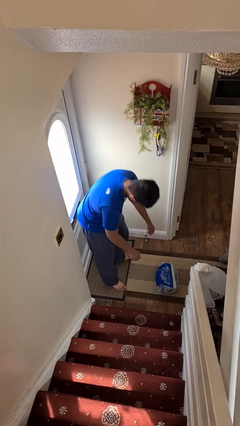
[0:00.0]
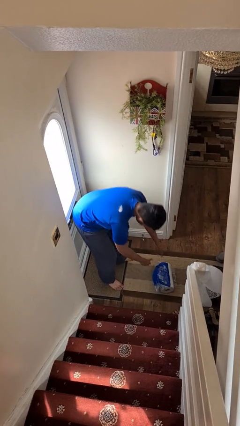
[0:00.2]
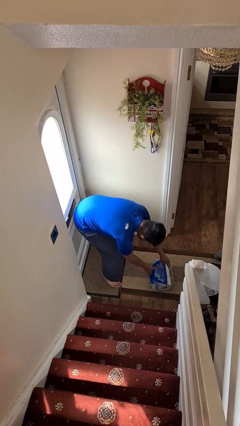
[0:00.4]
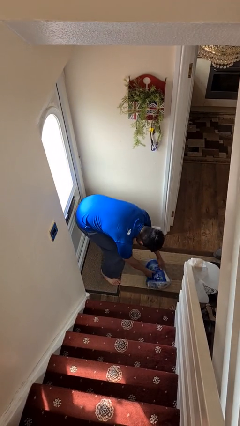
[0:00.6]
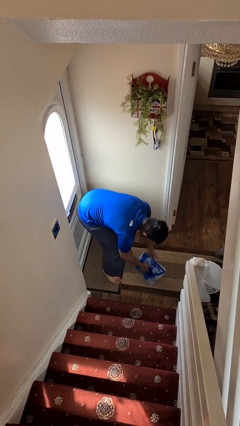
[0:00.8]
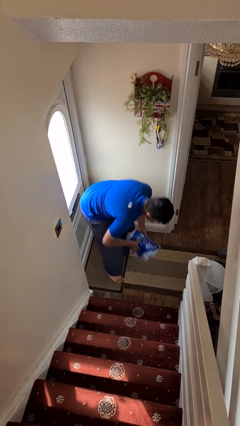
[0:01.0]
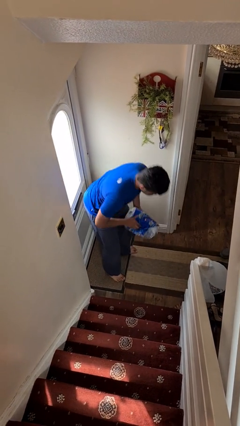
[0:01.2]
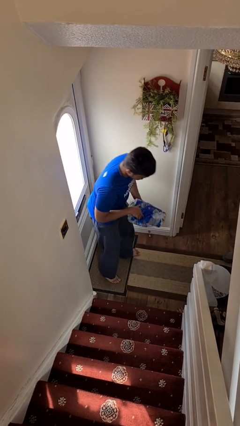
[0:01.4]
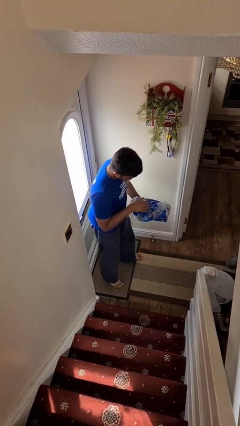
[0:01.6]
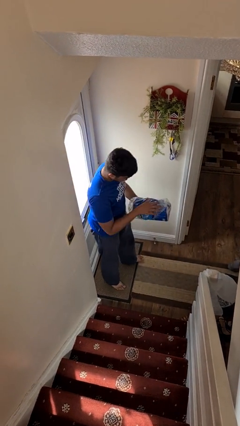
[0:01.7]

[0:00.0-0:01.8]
person picks up object from floor

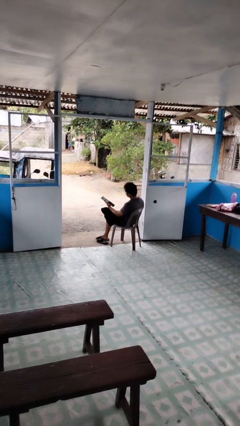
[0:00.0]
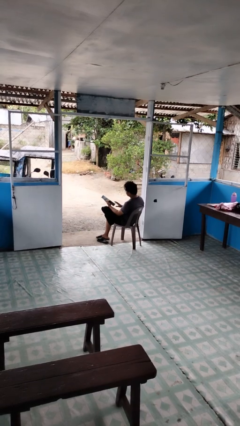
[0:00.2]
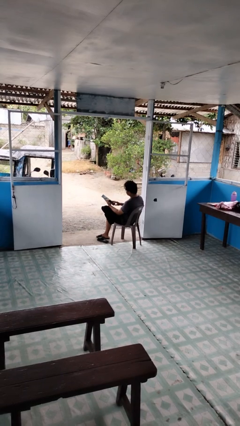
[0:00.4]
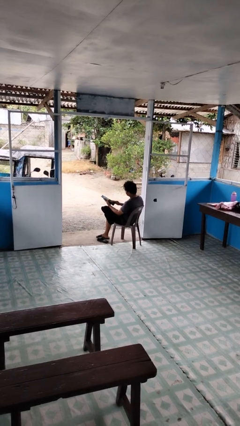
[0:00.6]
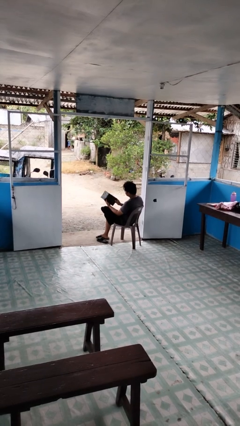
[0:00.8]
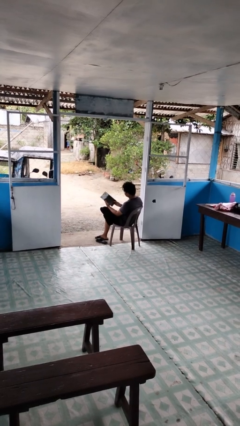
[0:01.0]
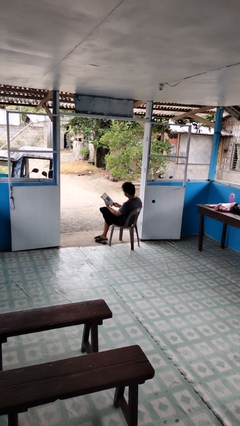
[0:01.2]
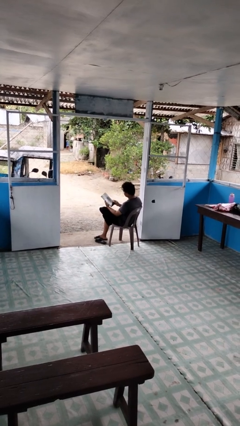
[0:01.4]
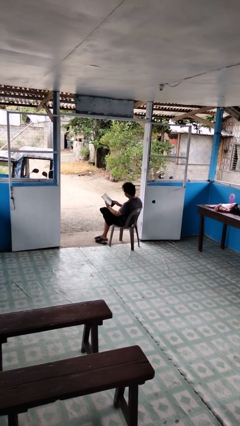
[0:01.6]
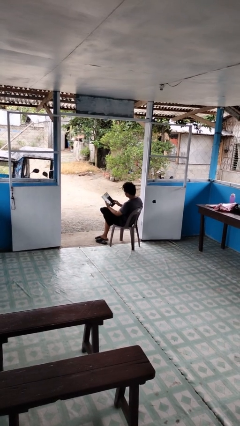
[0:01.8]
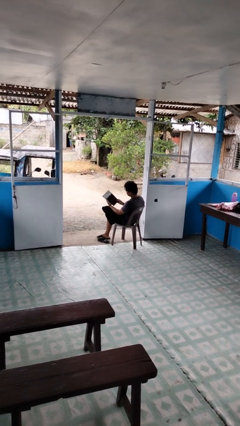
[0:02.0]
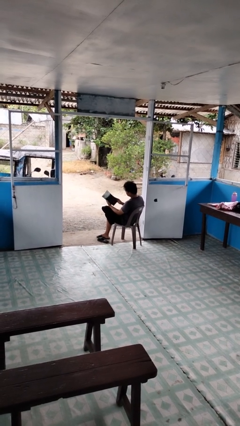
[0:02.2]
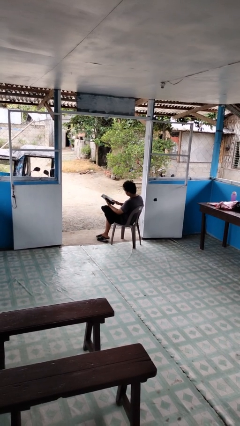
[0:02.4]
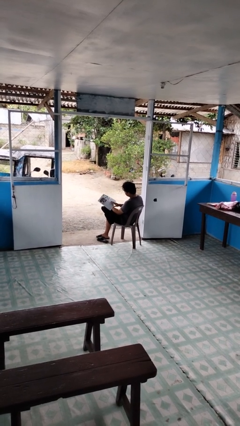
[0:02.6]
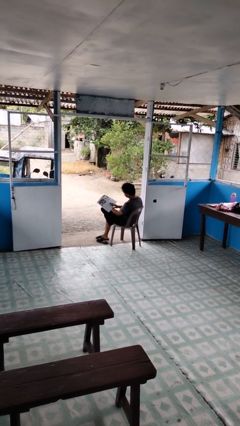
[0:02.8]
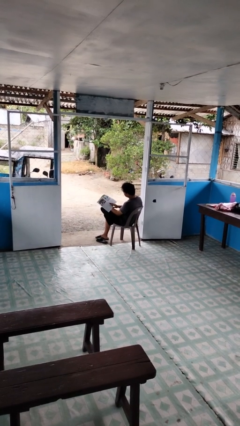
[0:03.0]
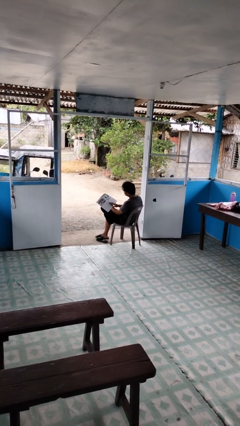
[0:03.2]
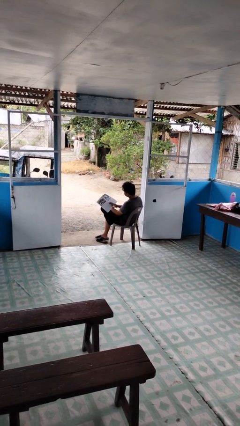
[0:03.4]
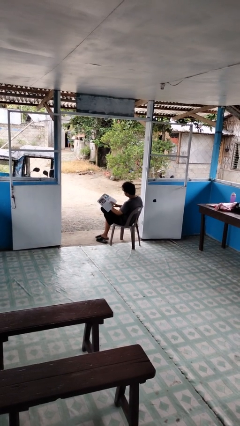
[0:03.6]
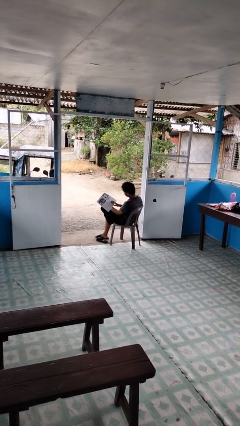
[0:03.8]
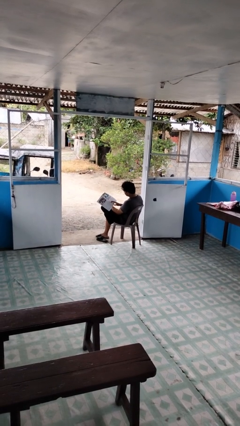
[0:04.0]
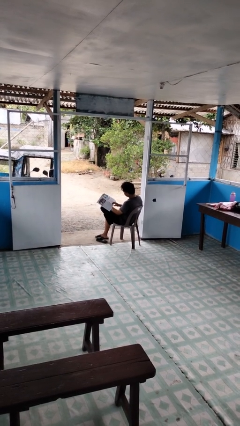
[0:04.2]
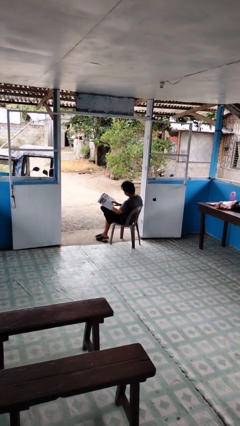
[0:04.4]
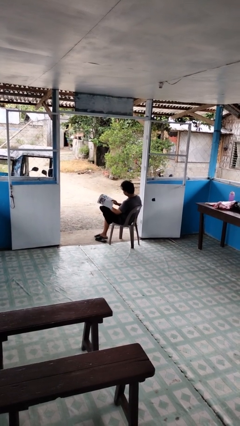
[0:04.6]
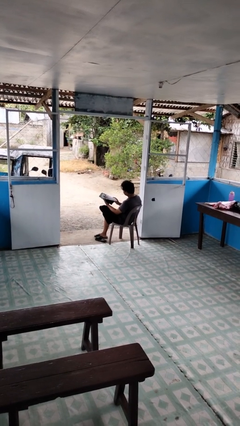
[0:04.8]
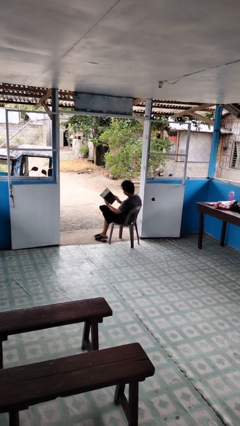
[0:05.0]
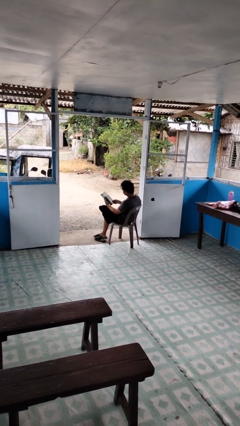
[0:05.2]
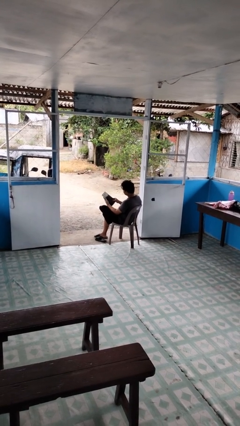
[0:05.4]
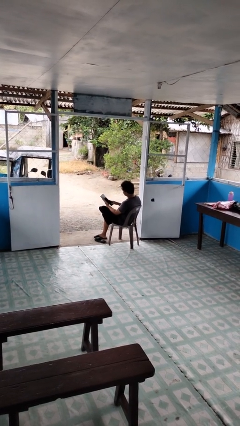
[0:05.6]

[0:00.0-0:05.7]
person reads magazine

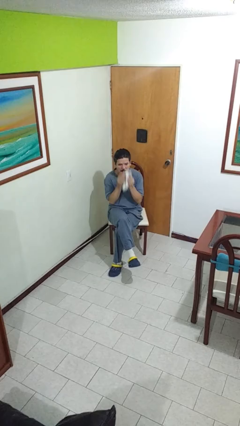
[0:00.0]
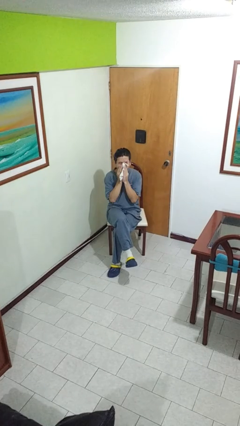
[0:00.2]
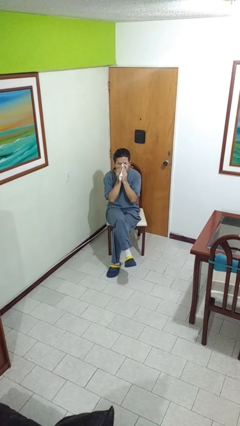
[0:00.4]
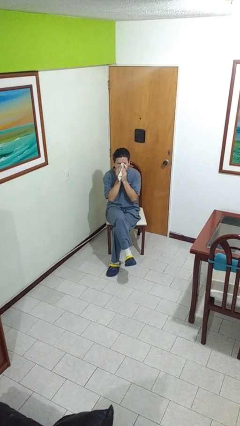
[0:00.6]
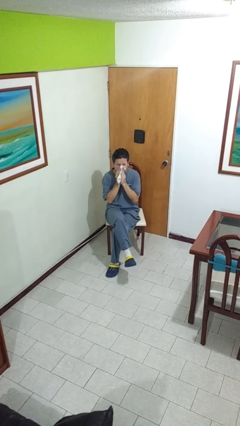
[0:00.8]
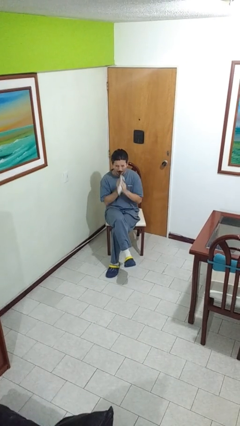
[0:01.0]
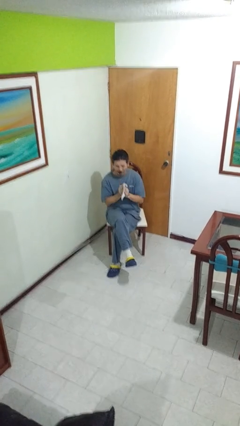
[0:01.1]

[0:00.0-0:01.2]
person blows nose

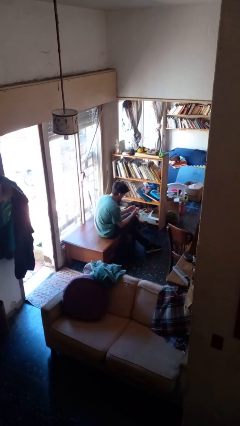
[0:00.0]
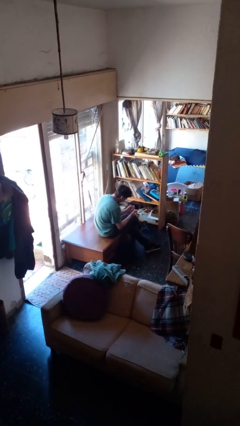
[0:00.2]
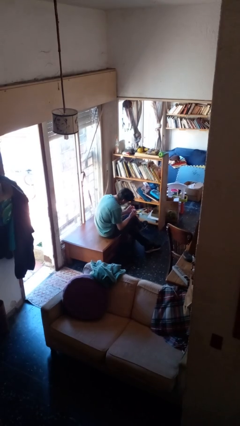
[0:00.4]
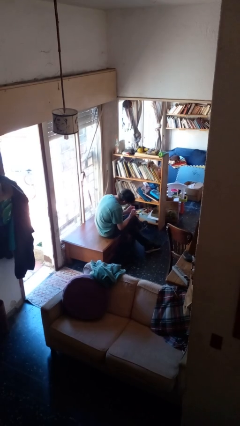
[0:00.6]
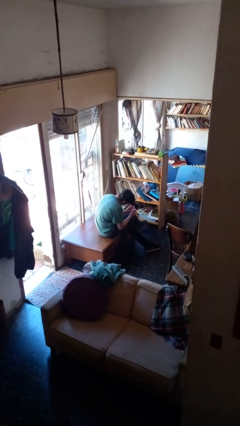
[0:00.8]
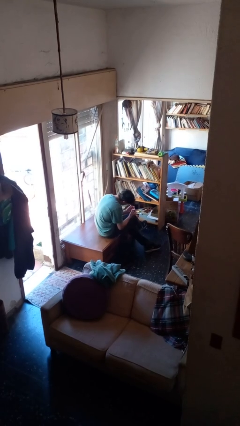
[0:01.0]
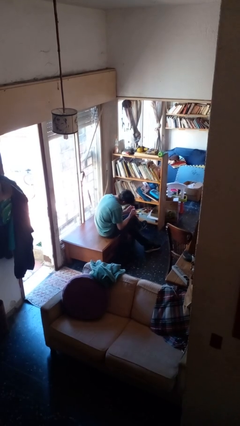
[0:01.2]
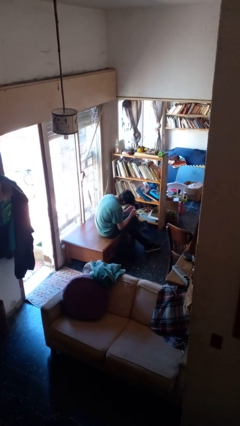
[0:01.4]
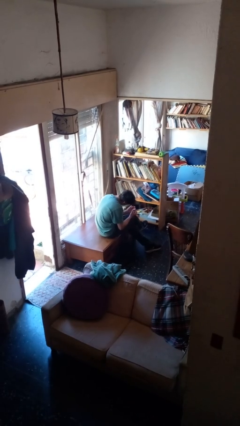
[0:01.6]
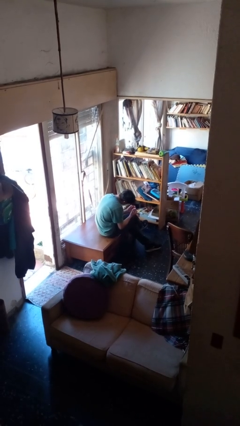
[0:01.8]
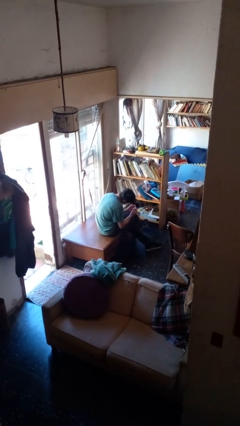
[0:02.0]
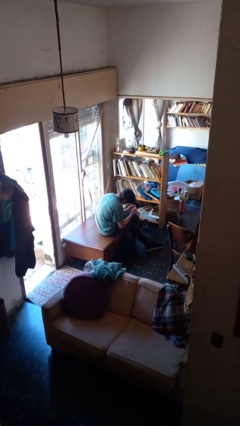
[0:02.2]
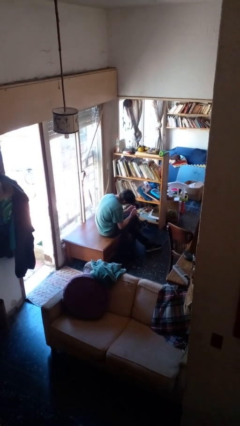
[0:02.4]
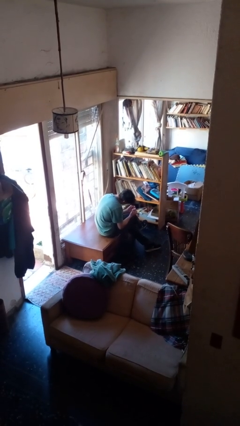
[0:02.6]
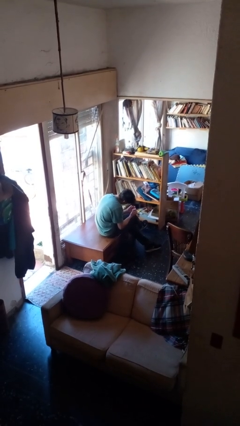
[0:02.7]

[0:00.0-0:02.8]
person paints fingernails

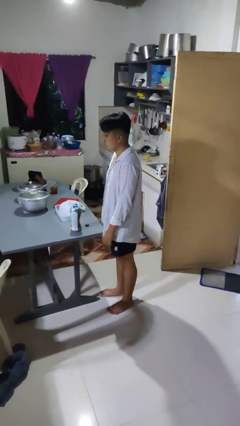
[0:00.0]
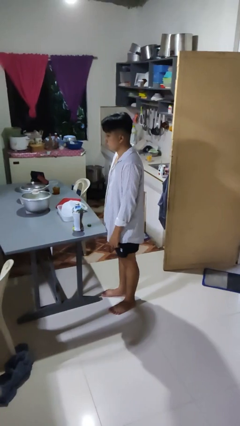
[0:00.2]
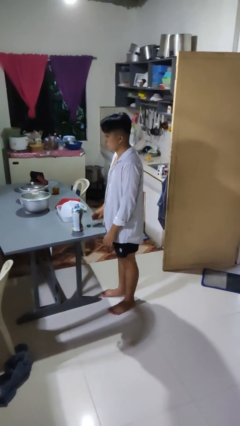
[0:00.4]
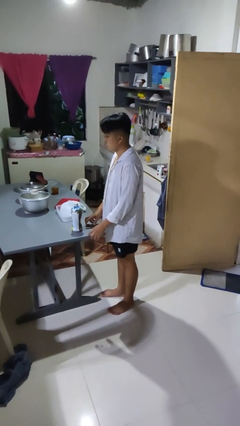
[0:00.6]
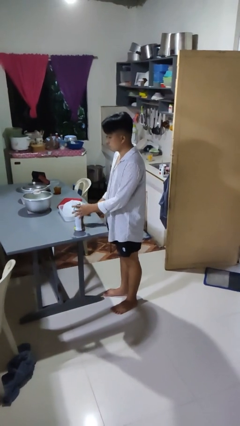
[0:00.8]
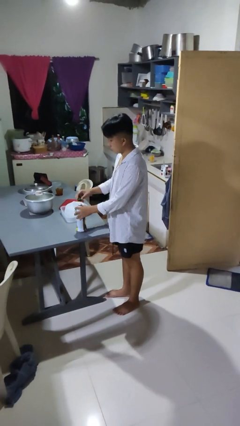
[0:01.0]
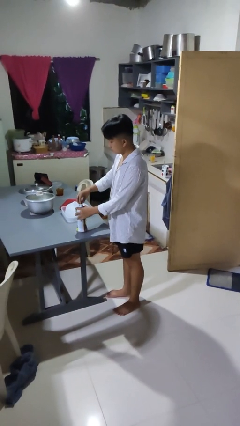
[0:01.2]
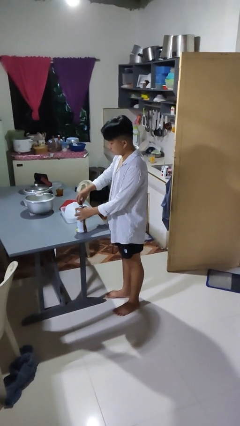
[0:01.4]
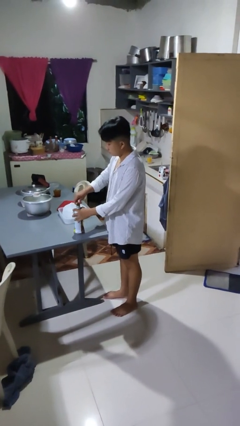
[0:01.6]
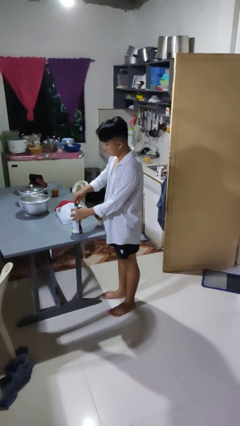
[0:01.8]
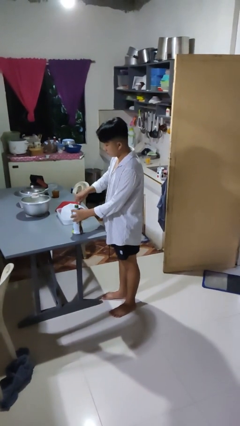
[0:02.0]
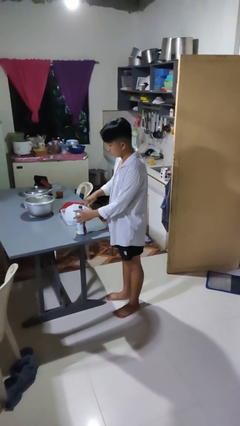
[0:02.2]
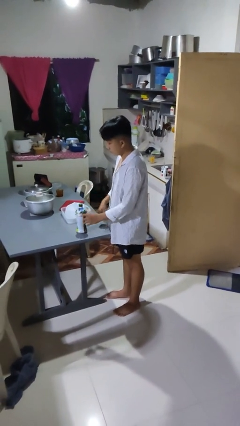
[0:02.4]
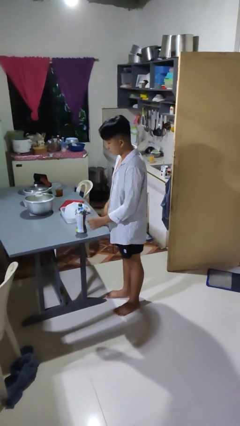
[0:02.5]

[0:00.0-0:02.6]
person screws lid to bottle

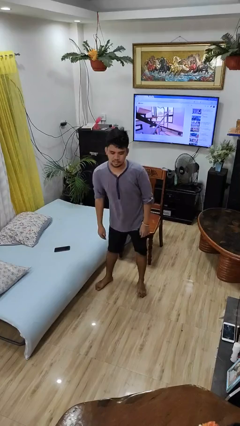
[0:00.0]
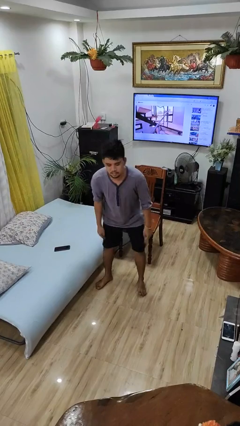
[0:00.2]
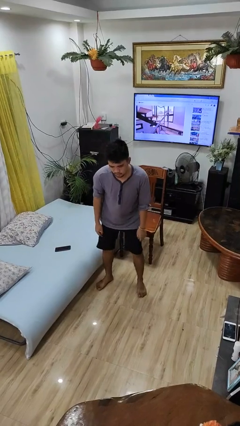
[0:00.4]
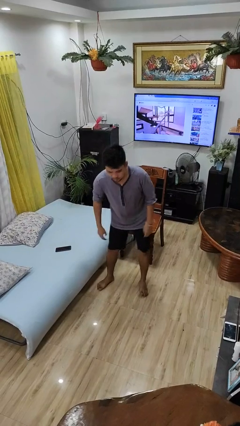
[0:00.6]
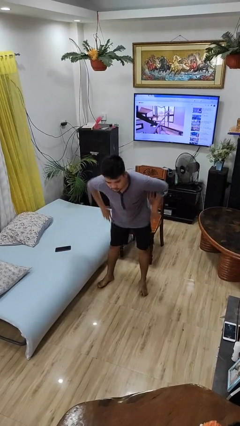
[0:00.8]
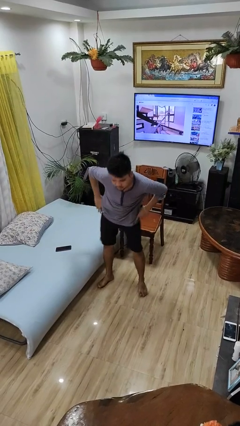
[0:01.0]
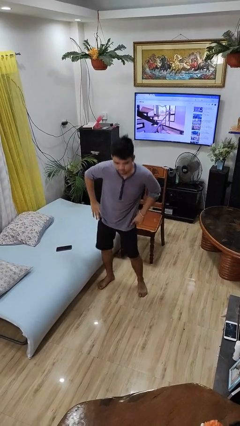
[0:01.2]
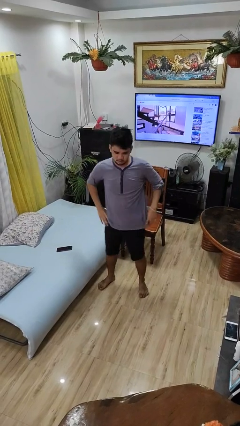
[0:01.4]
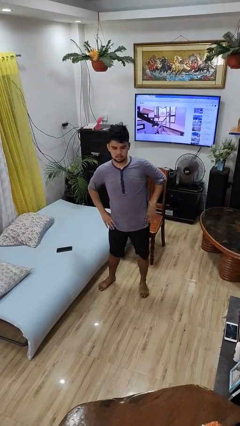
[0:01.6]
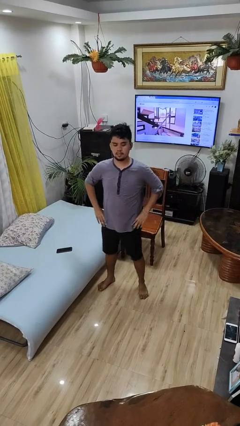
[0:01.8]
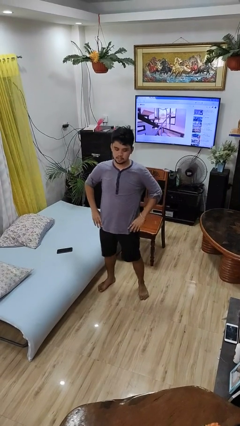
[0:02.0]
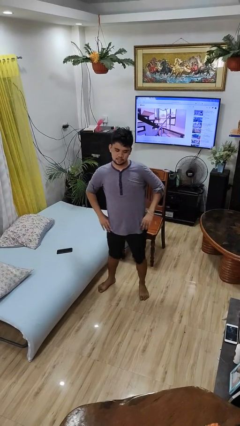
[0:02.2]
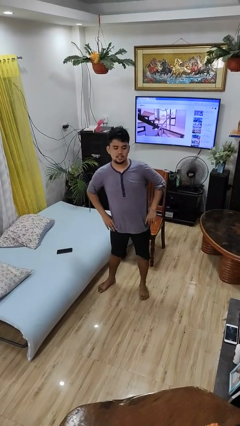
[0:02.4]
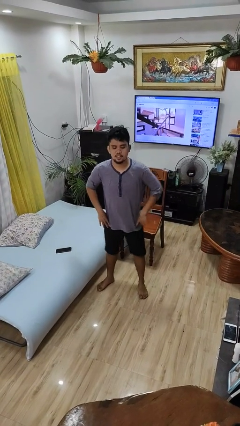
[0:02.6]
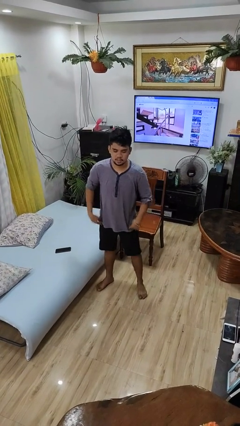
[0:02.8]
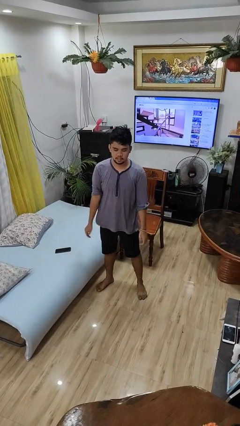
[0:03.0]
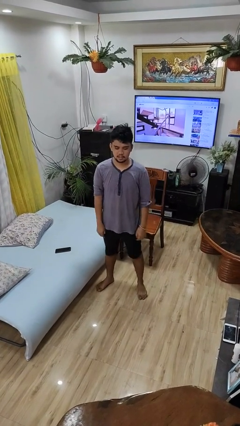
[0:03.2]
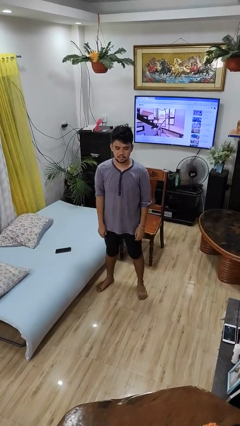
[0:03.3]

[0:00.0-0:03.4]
person wiggles hips

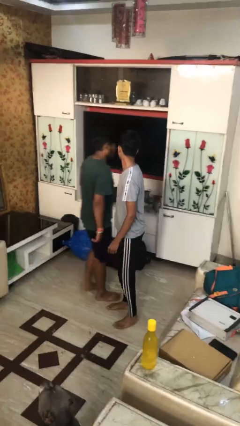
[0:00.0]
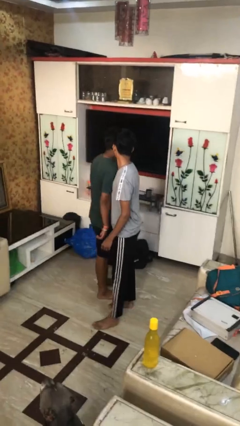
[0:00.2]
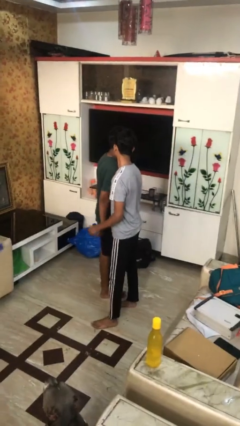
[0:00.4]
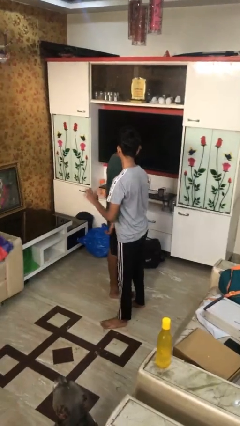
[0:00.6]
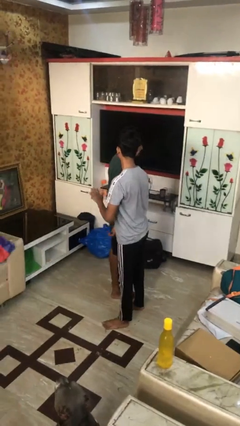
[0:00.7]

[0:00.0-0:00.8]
person bumps into person
